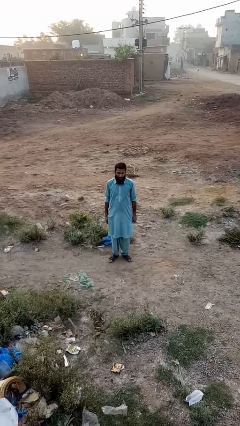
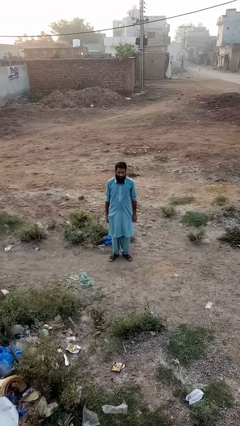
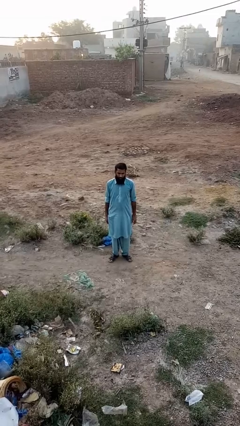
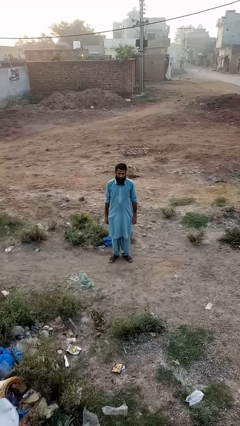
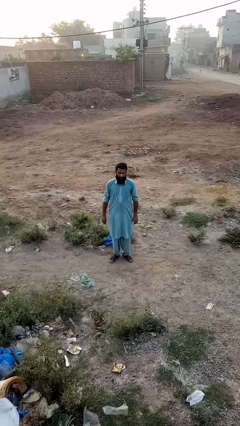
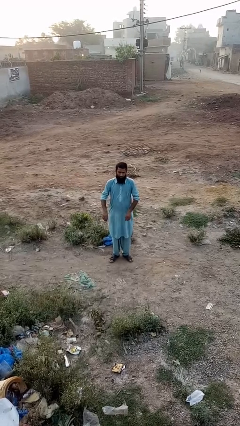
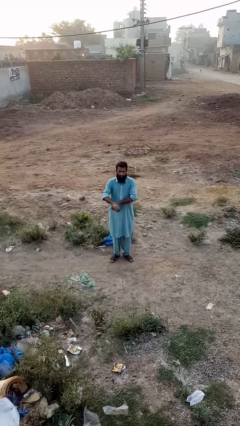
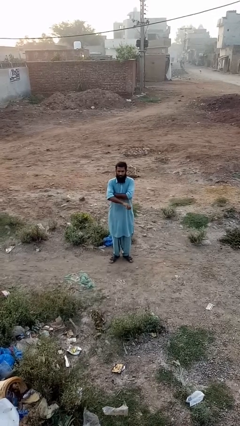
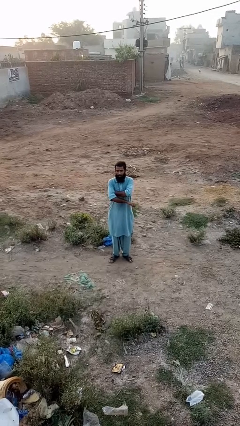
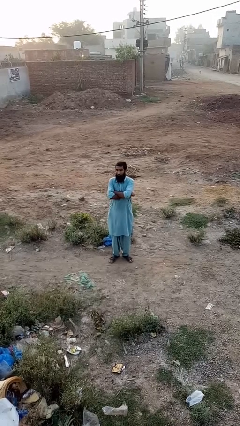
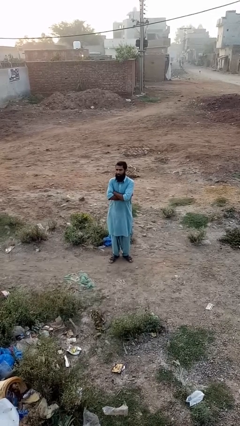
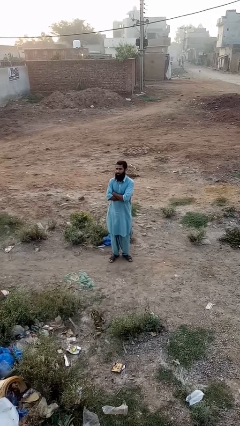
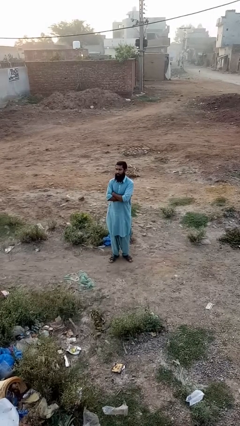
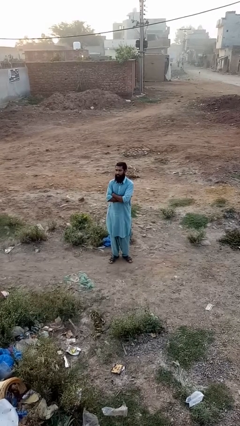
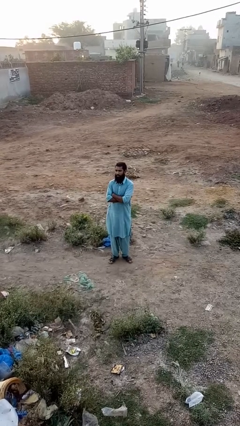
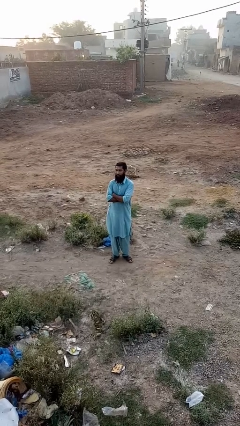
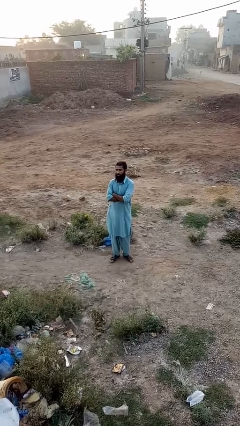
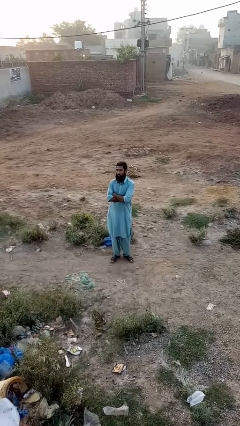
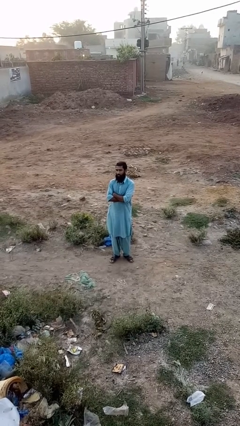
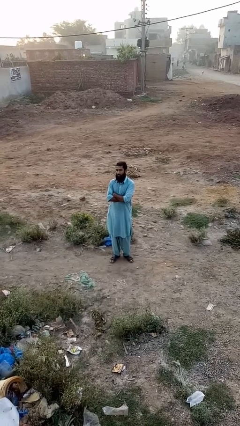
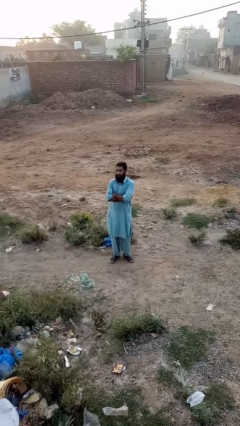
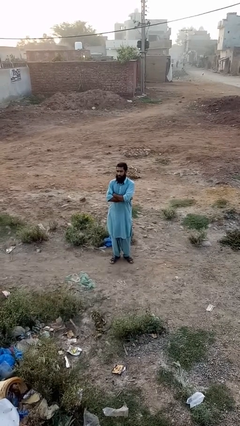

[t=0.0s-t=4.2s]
person crosses arms

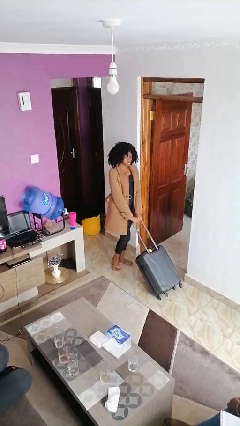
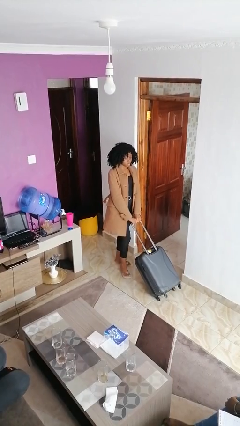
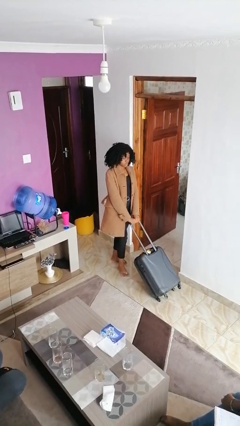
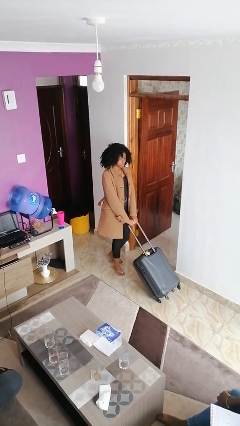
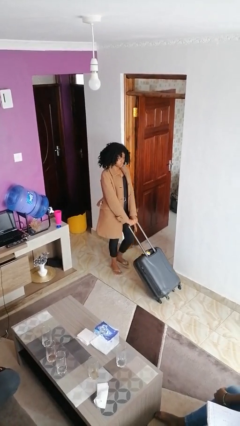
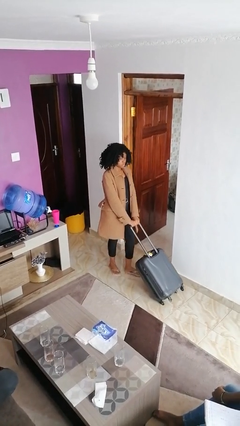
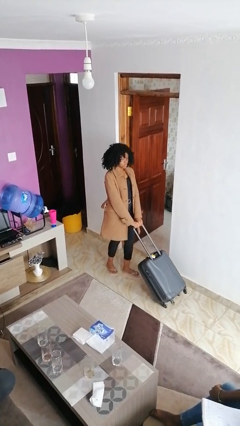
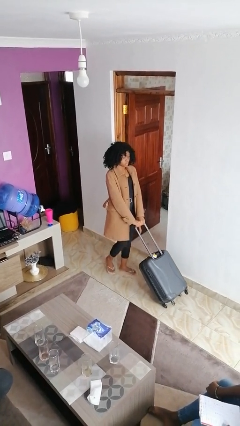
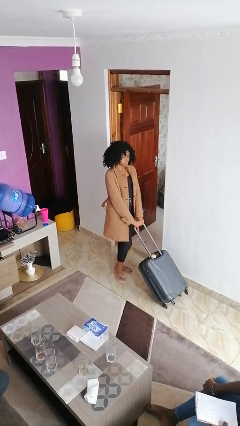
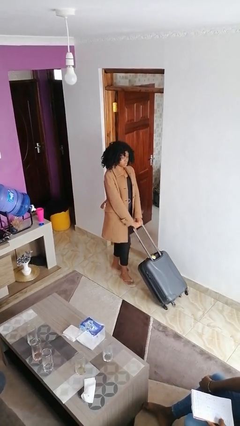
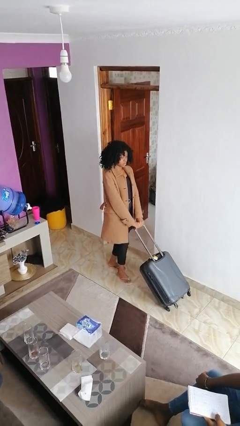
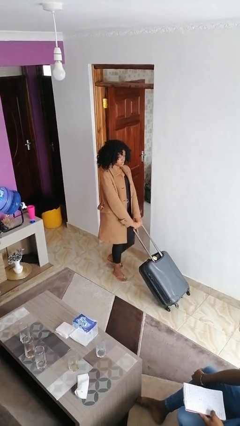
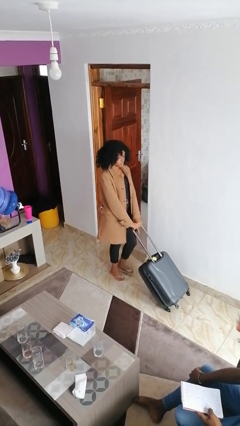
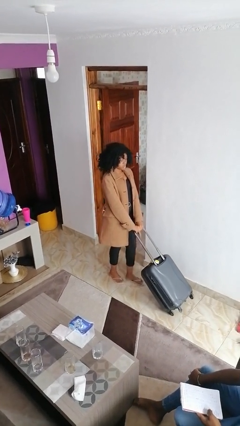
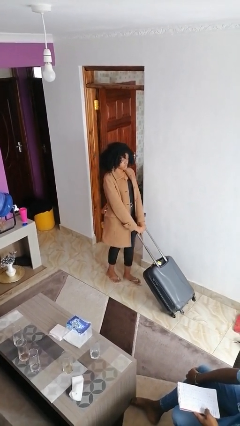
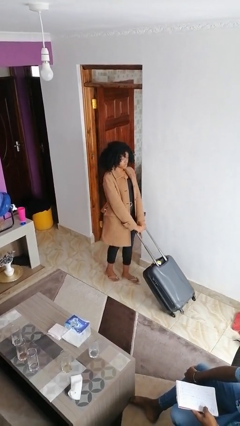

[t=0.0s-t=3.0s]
person pushes wheeled cart

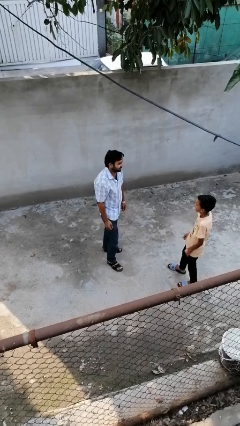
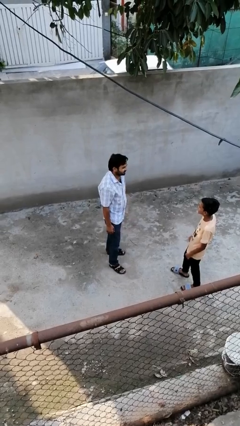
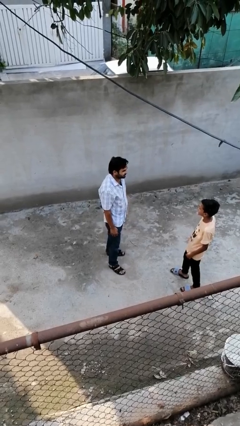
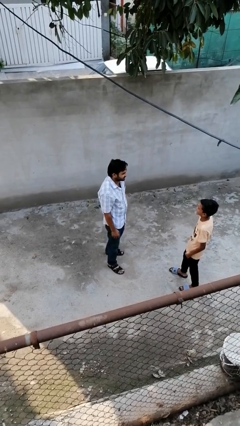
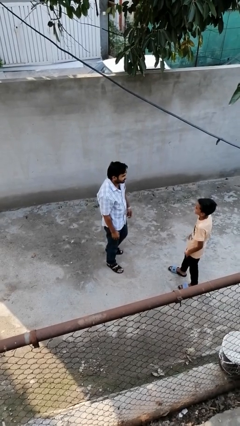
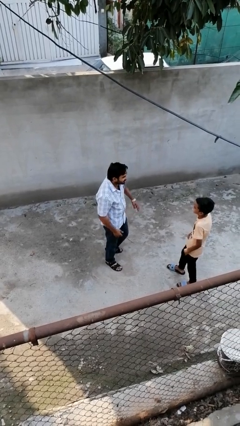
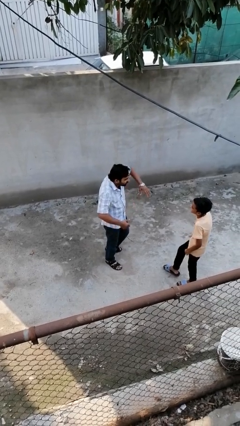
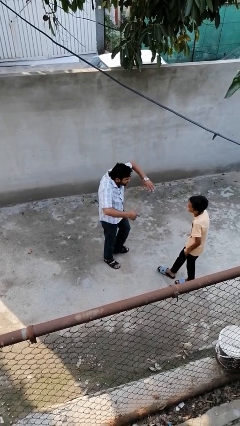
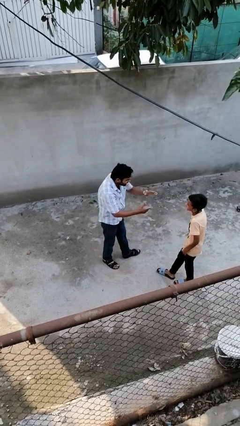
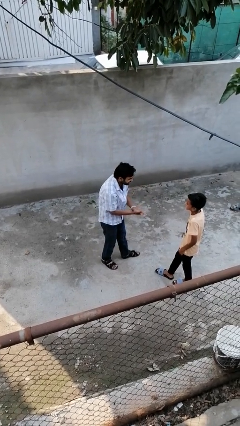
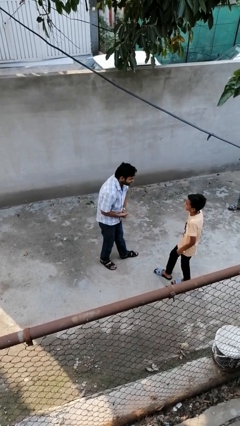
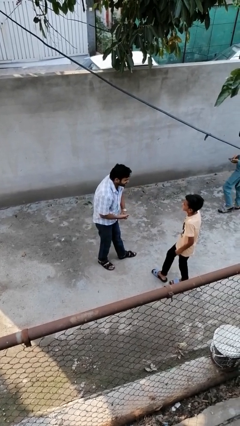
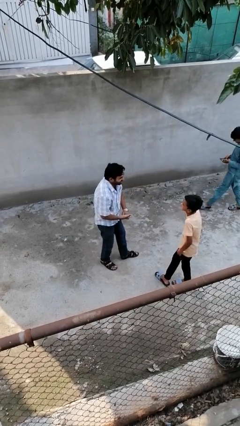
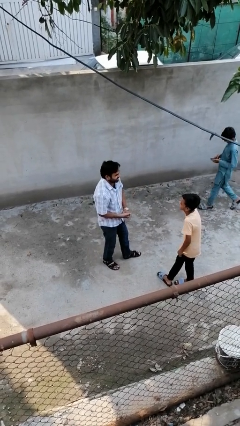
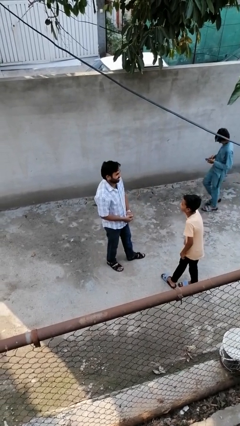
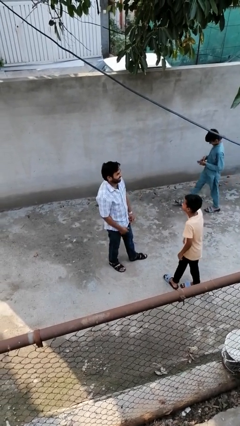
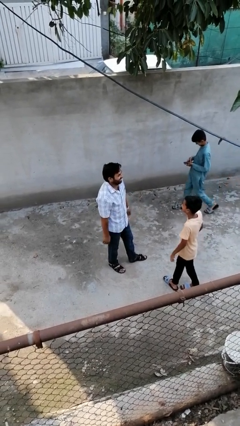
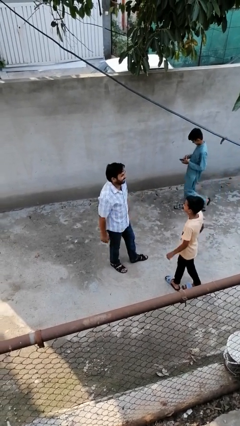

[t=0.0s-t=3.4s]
person laughs with person

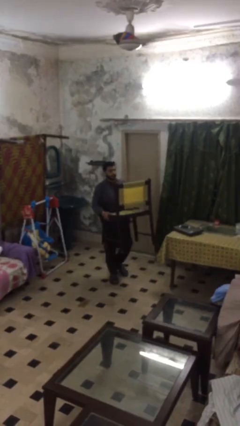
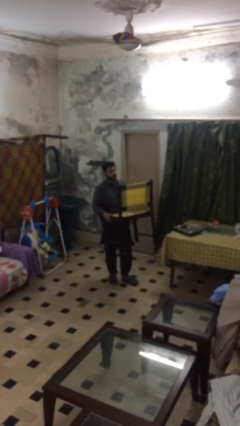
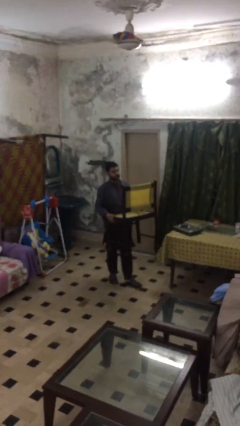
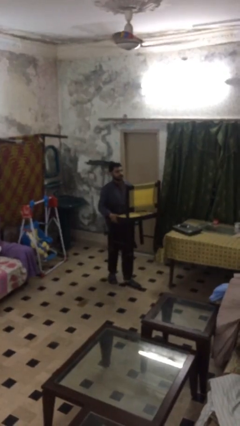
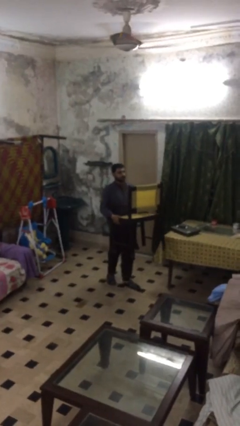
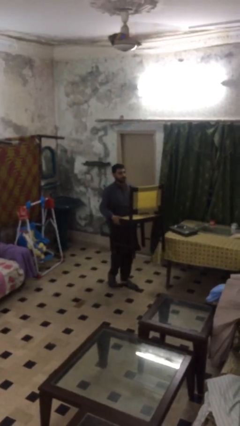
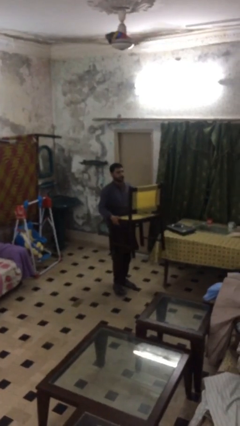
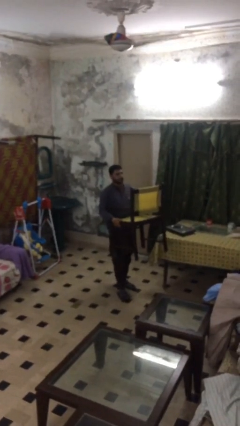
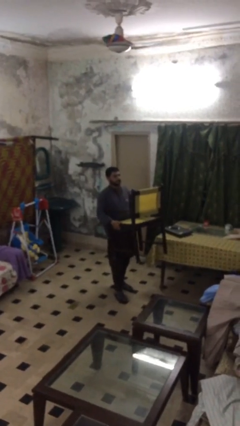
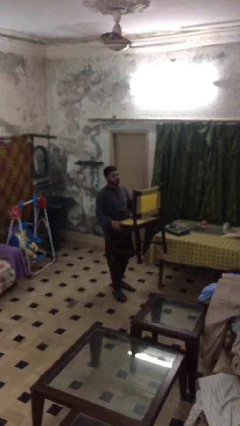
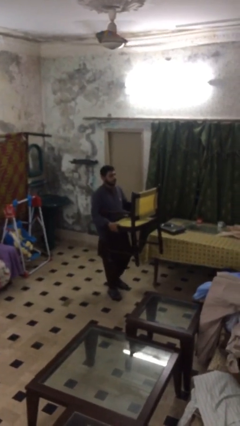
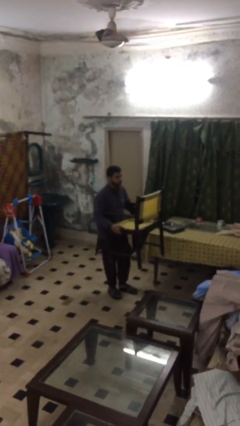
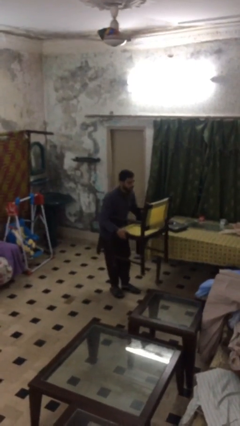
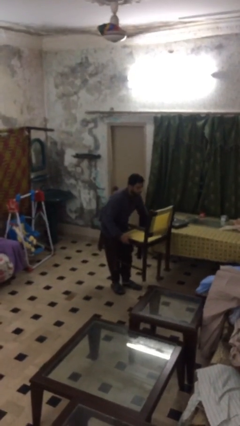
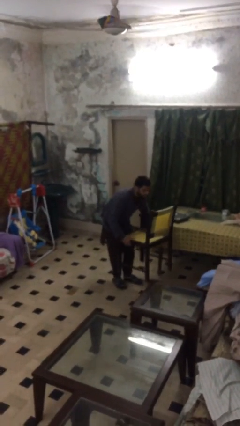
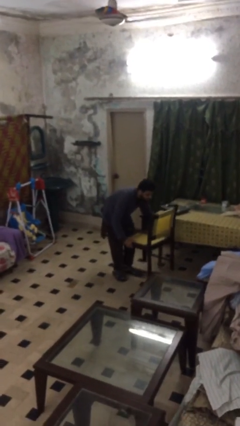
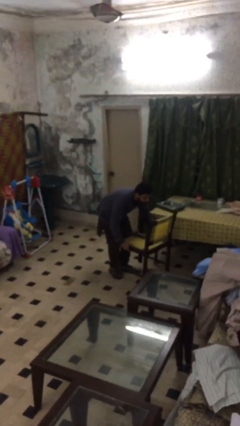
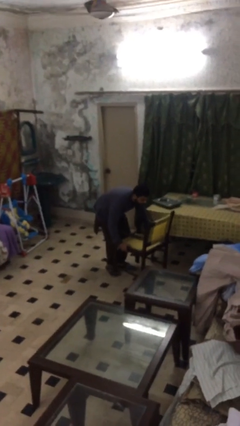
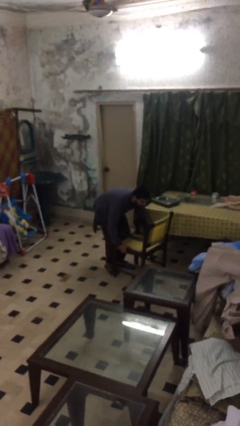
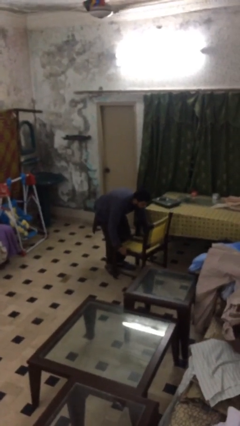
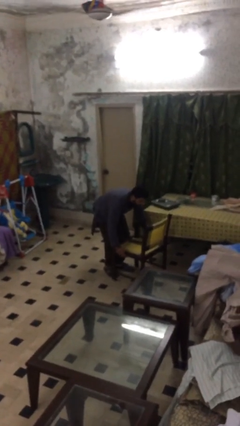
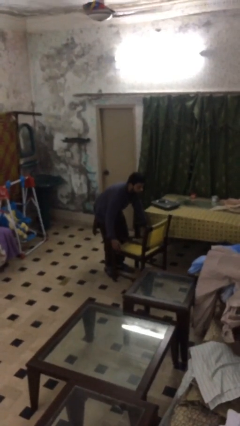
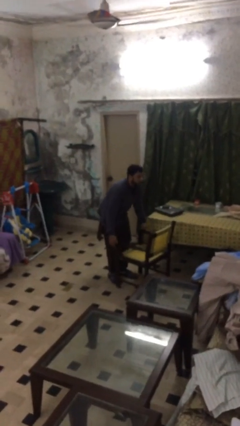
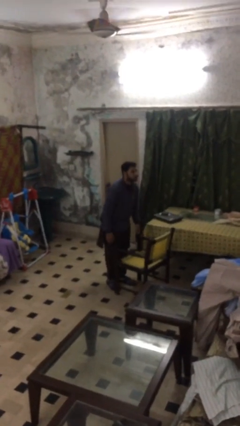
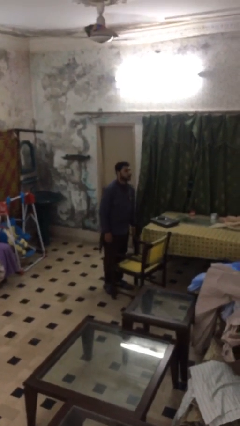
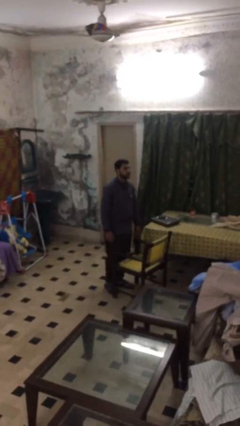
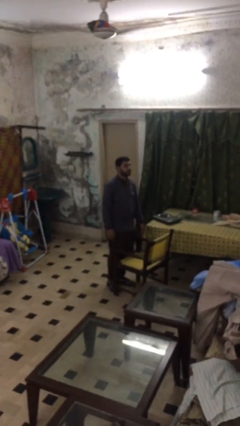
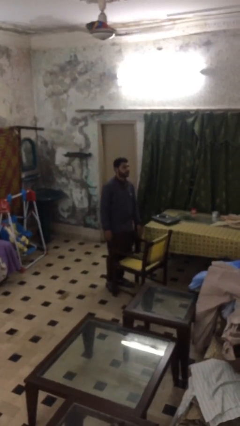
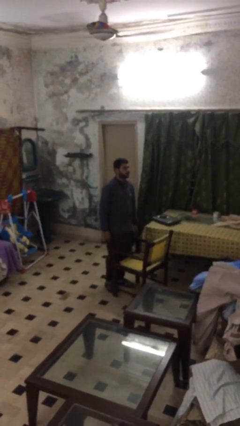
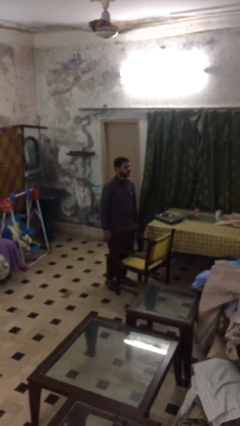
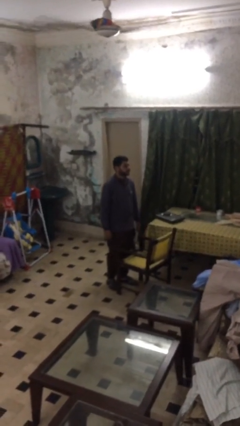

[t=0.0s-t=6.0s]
person puts down object on floor

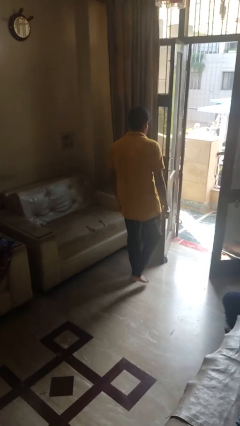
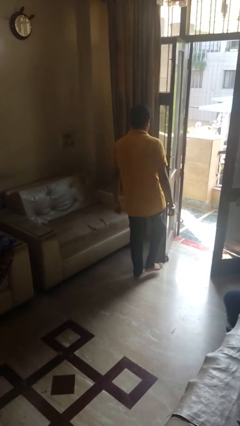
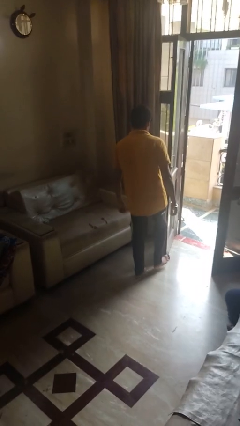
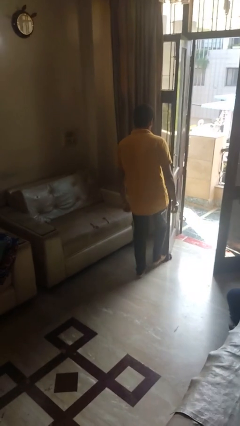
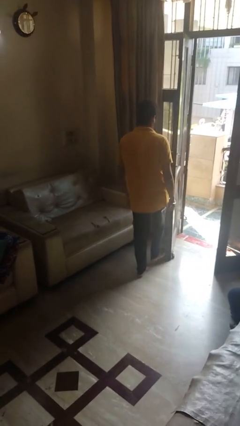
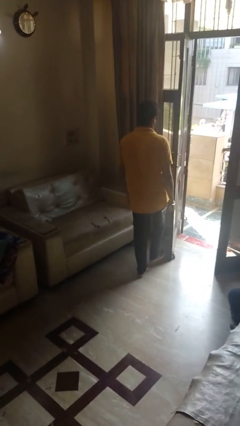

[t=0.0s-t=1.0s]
person stubs toe
